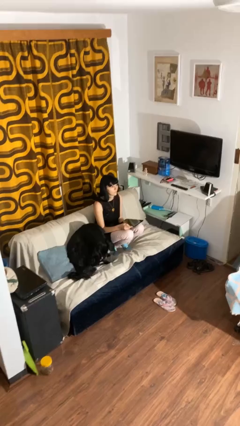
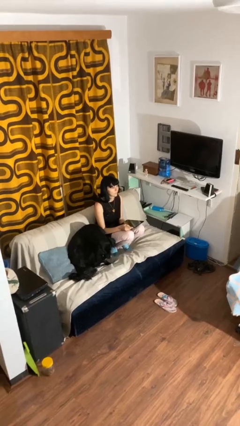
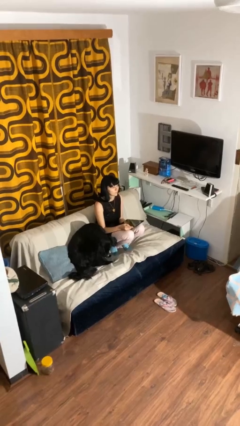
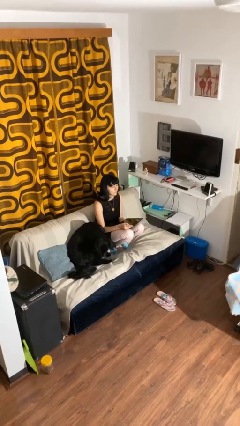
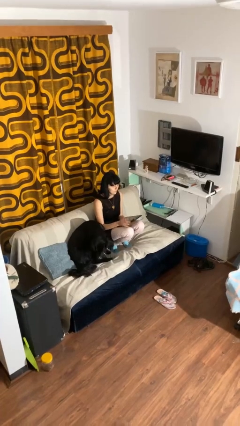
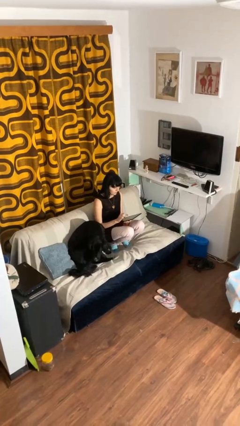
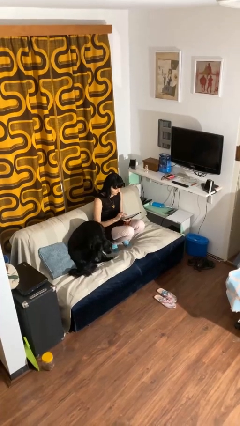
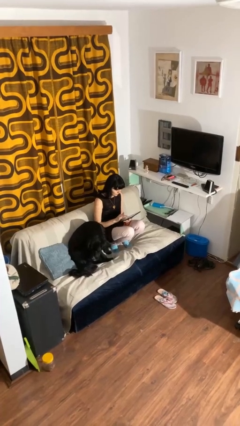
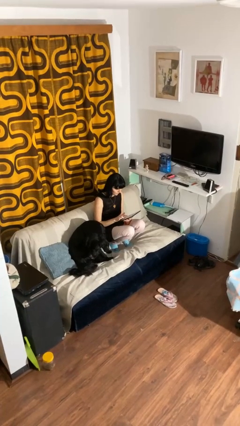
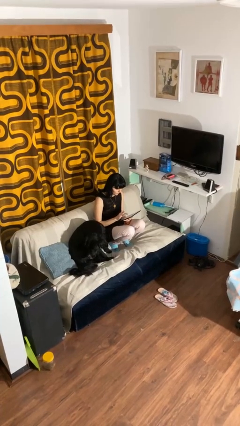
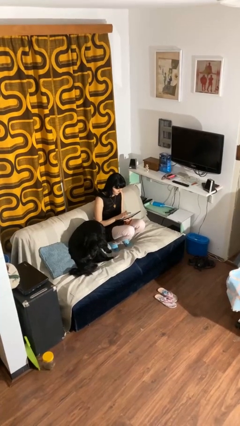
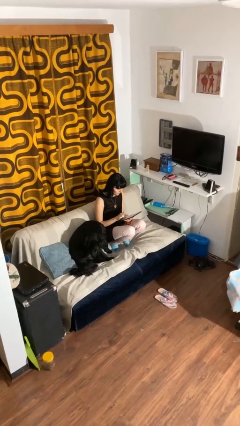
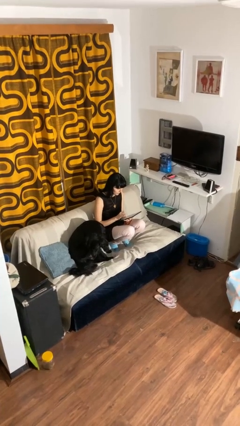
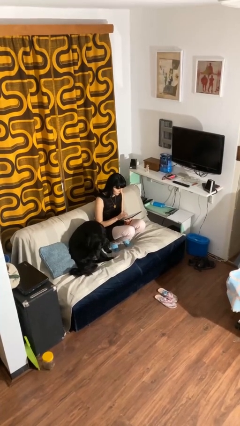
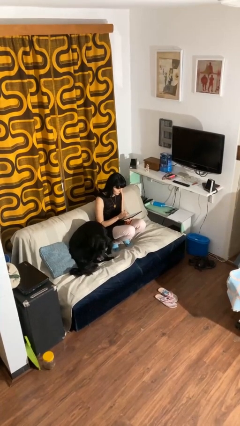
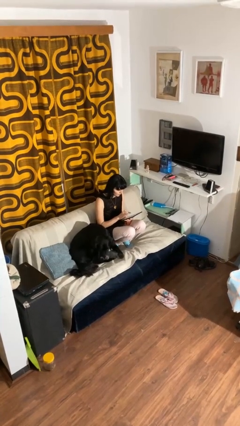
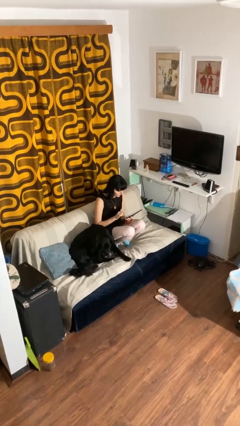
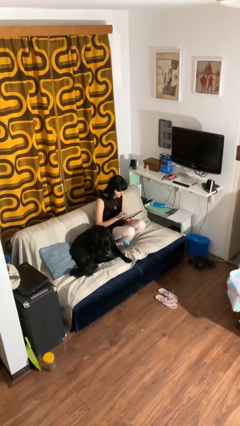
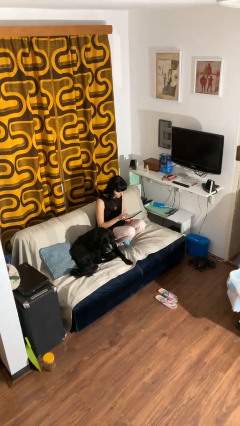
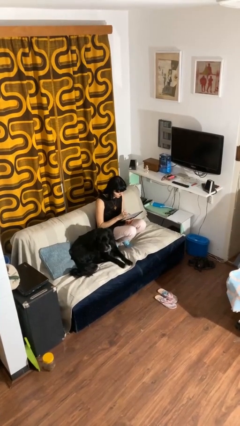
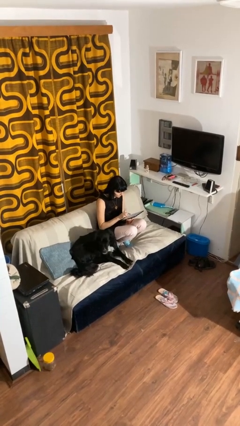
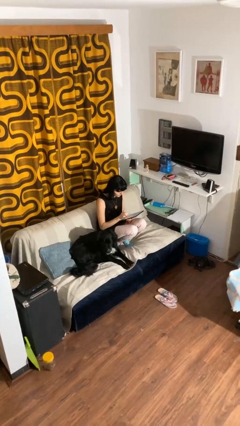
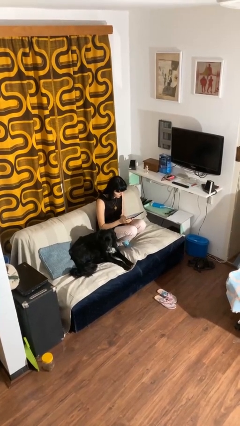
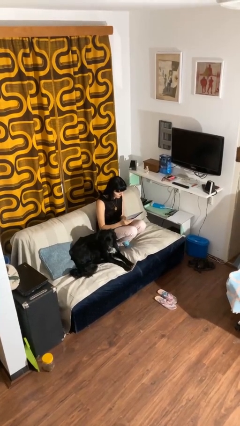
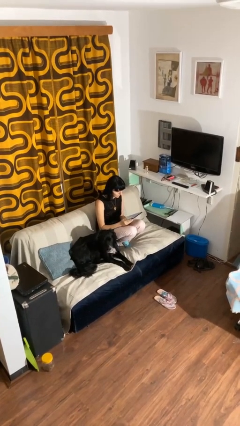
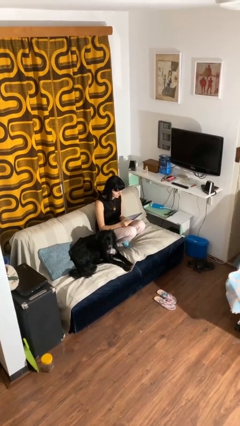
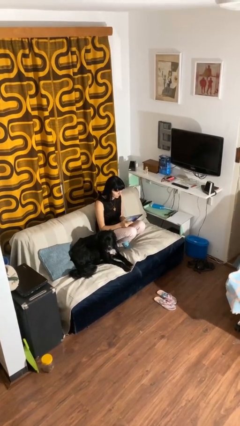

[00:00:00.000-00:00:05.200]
person interacts with tablet

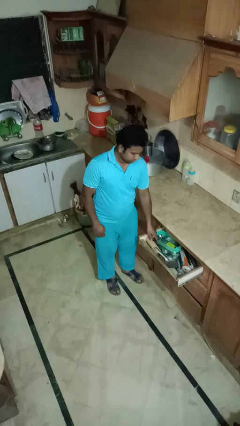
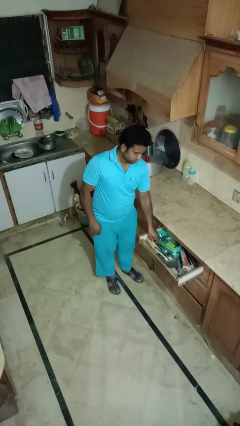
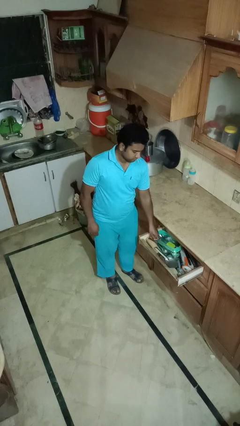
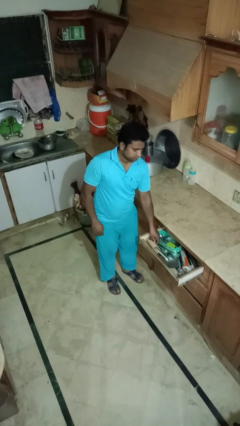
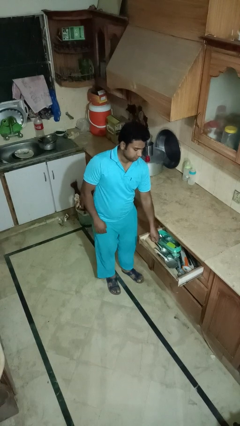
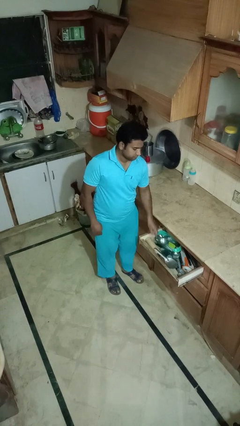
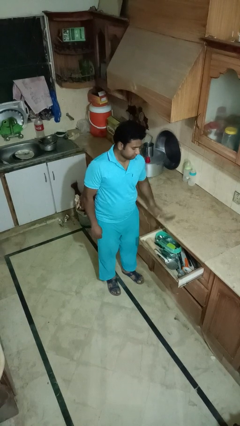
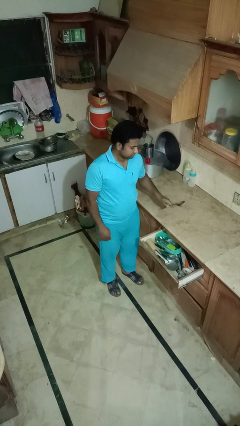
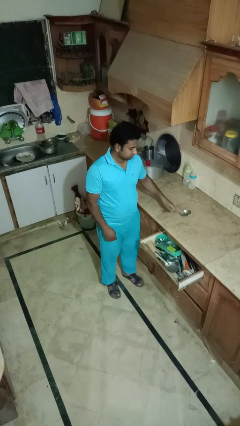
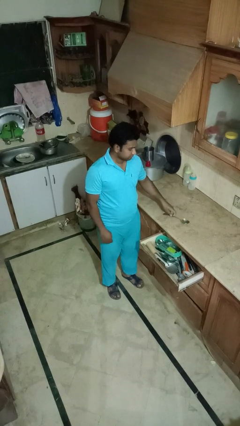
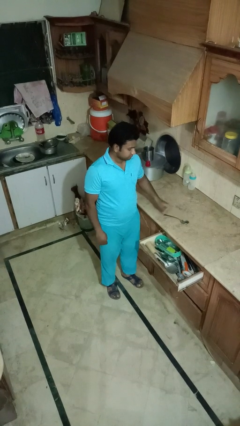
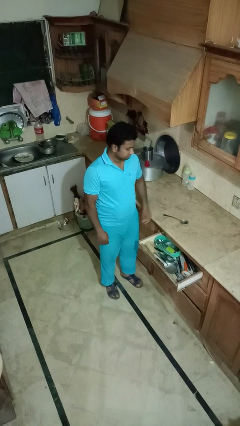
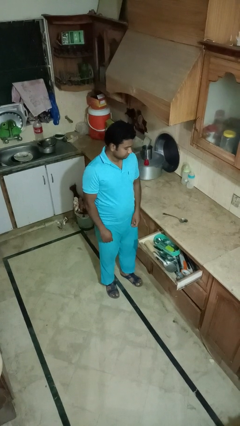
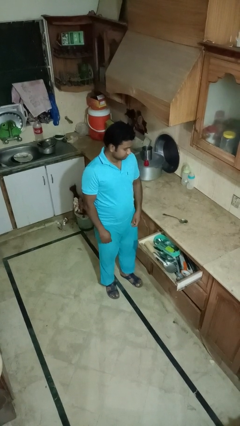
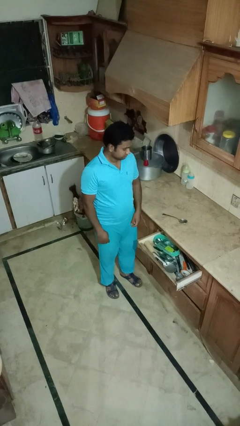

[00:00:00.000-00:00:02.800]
person takes object from kitchen drawer

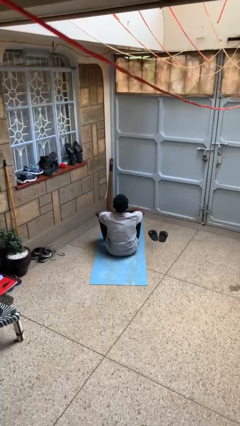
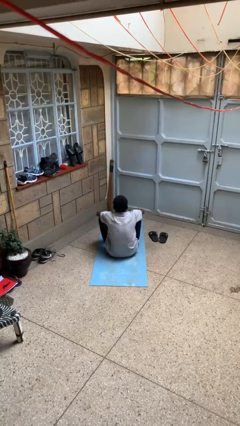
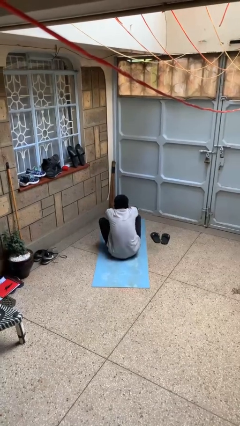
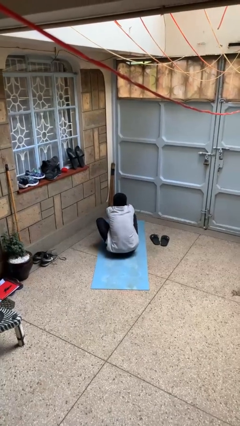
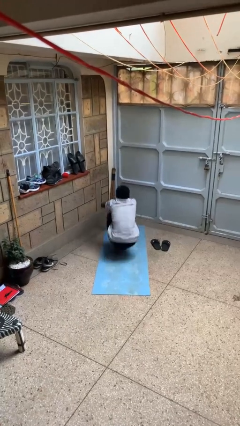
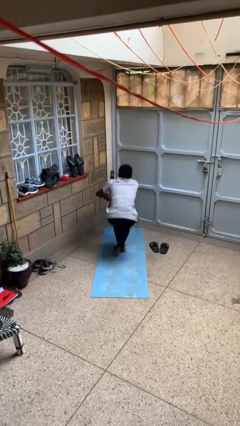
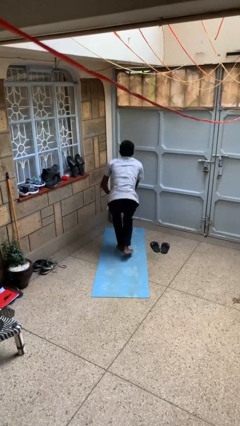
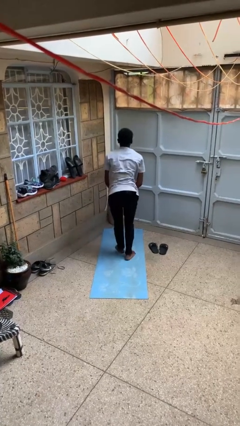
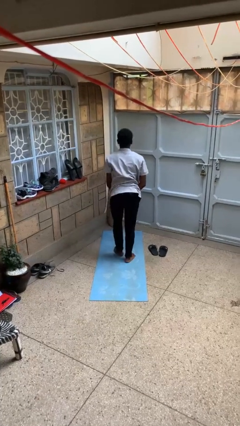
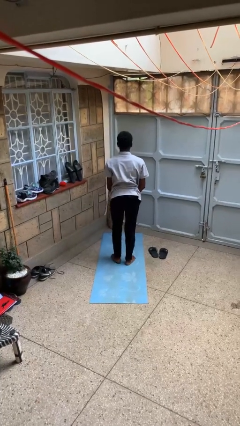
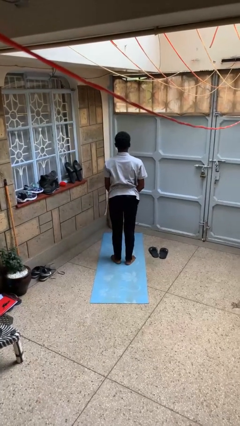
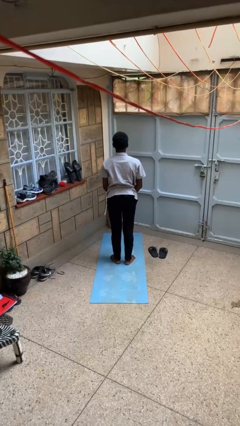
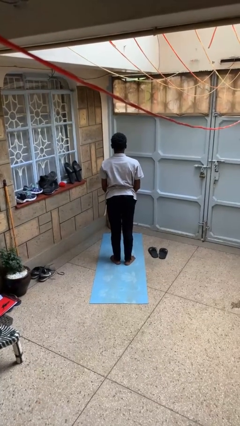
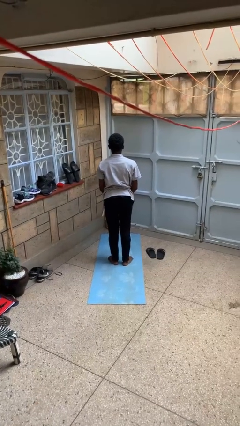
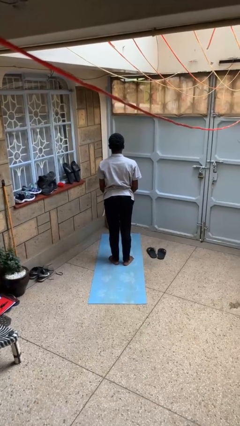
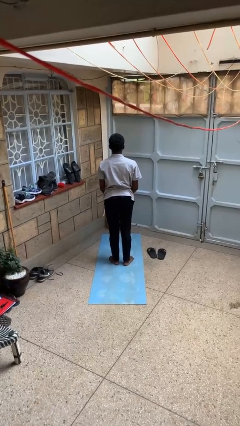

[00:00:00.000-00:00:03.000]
person stands up from floor

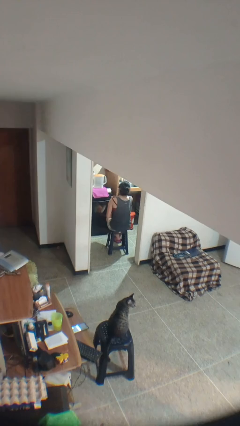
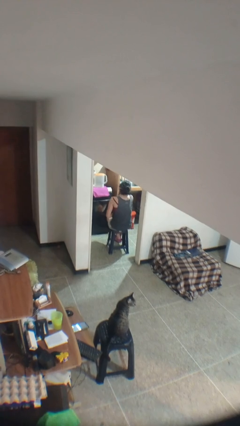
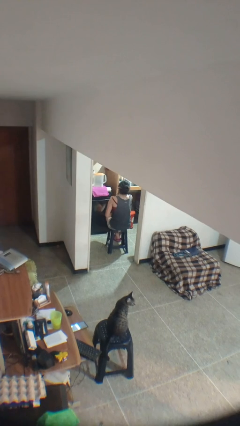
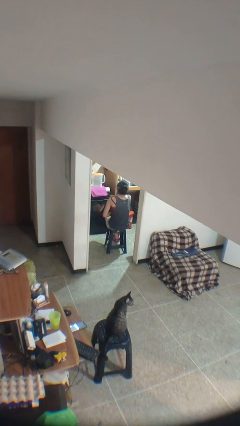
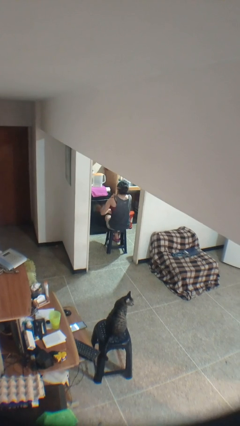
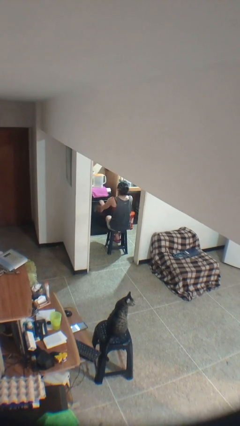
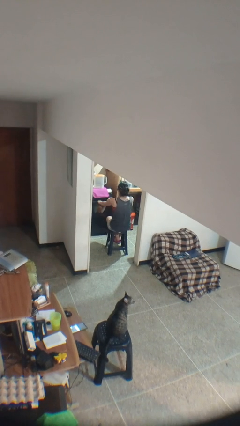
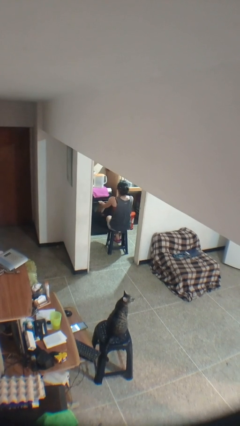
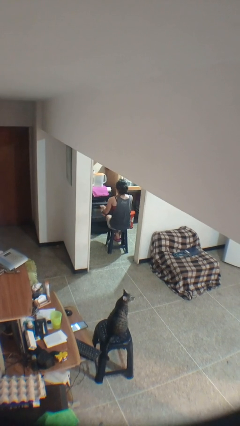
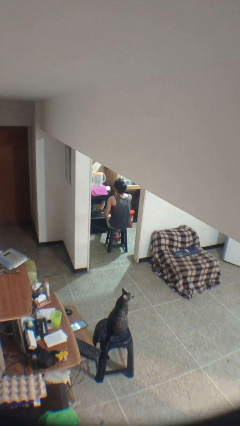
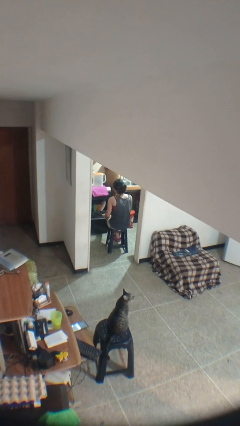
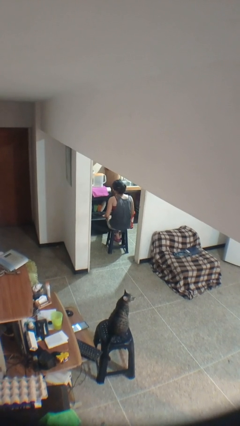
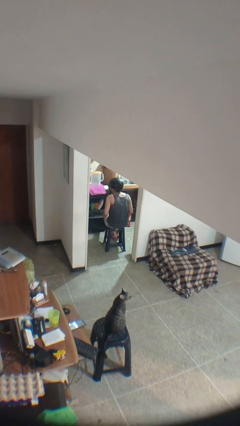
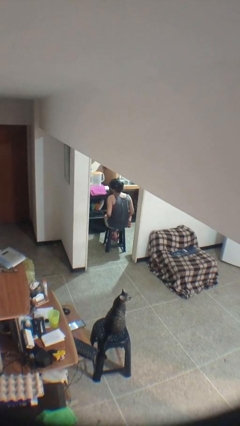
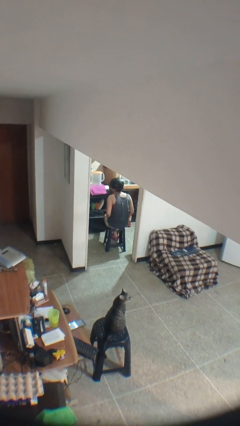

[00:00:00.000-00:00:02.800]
person opens dishwasher

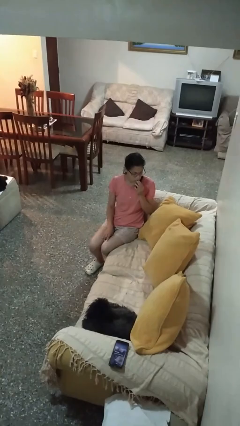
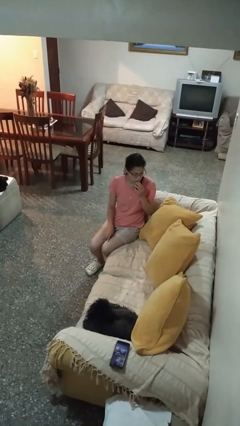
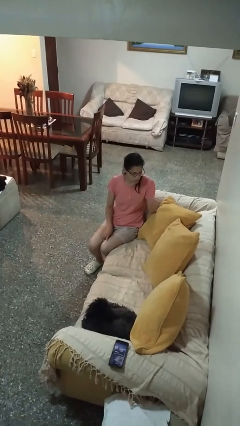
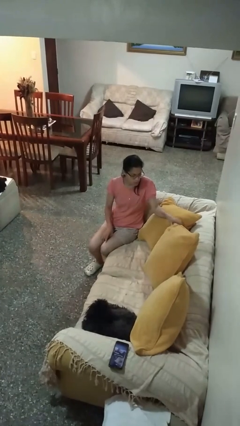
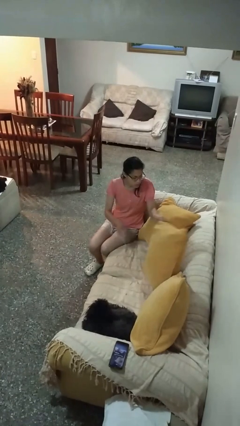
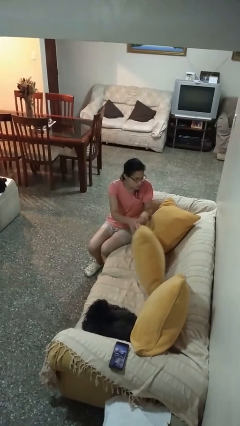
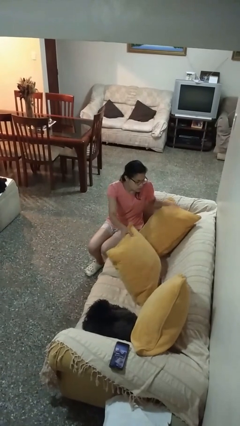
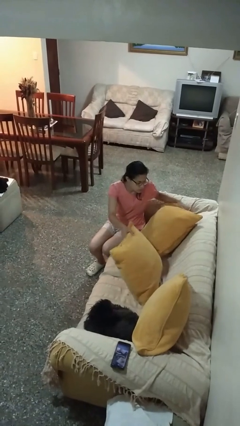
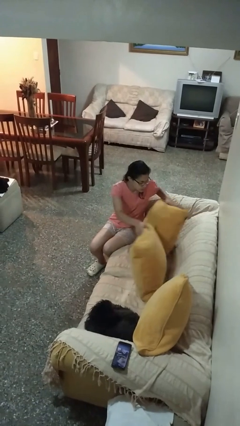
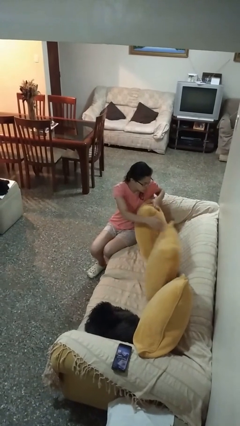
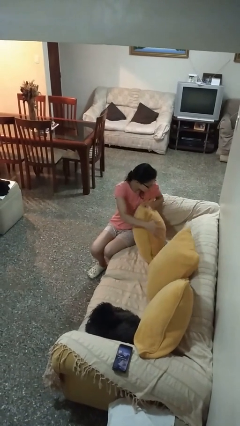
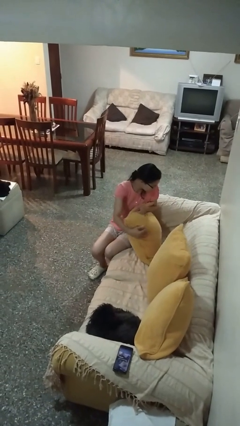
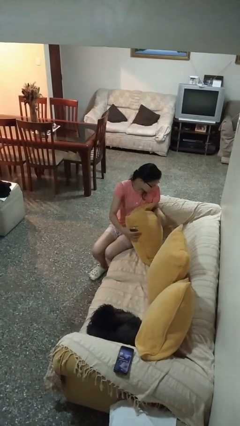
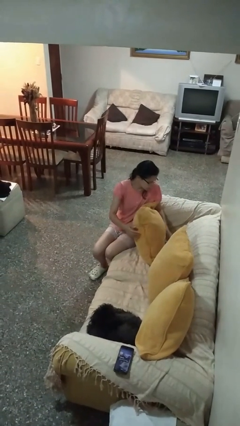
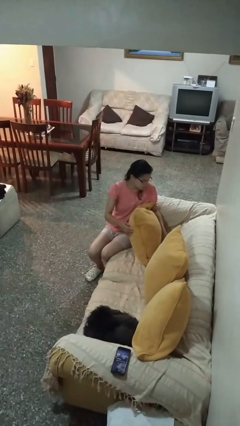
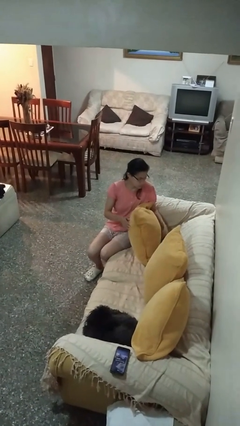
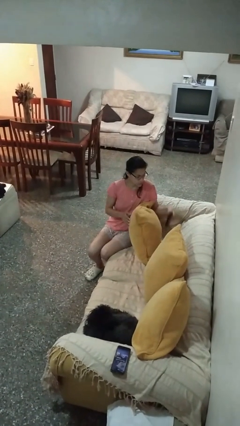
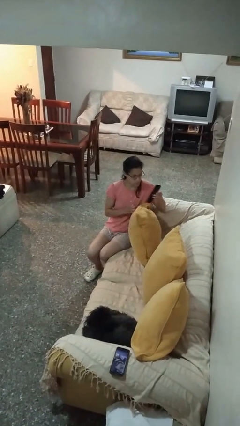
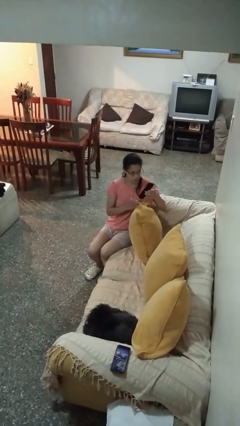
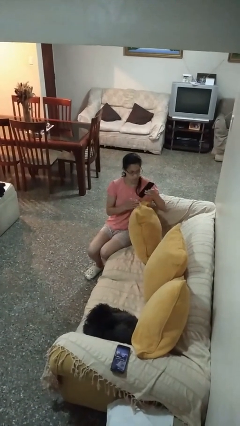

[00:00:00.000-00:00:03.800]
person searches in couch
